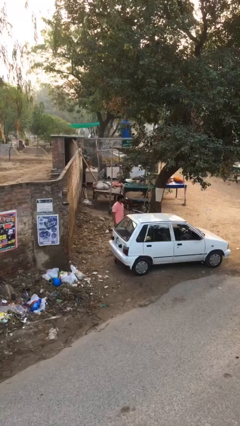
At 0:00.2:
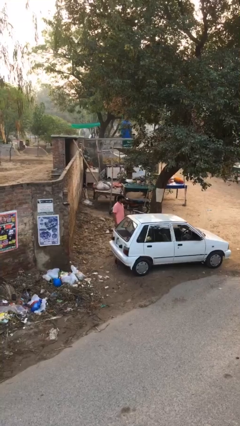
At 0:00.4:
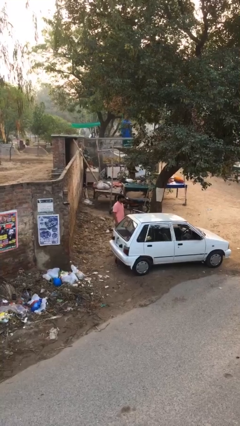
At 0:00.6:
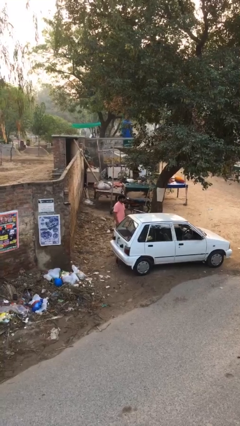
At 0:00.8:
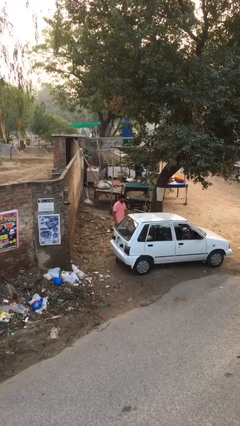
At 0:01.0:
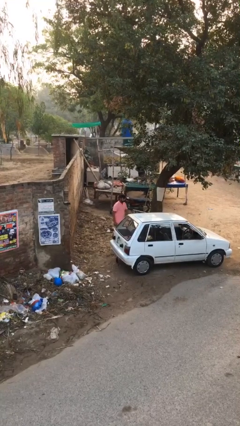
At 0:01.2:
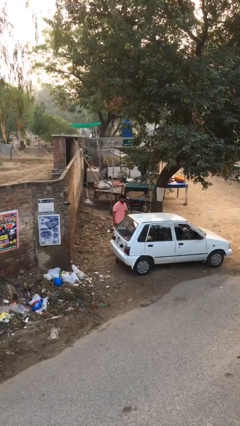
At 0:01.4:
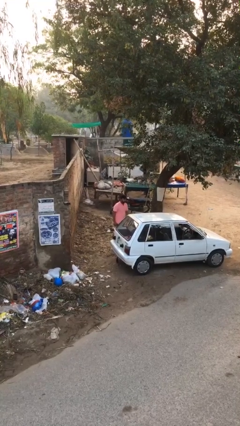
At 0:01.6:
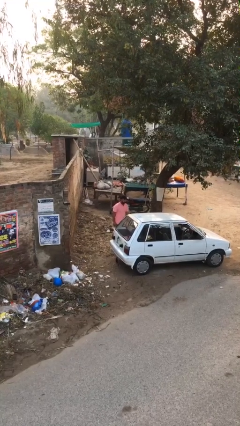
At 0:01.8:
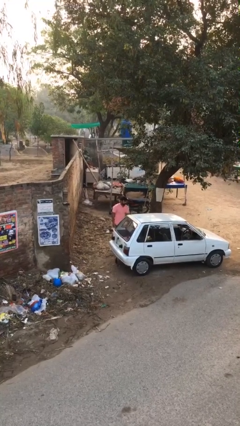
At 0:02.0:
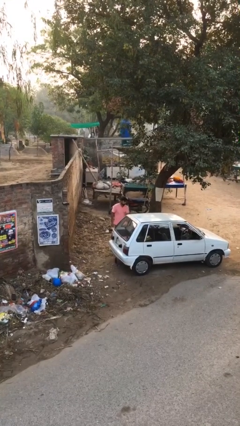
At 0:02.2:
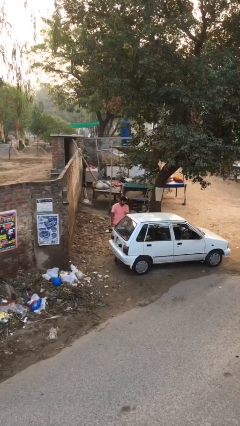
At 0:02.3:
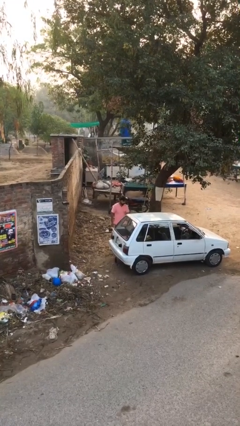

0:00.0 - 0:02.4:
person closes car door

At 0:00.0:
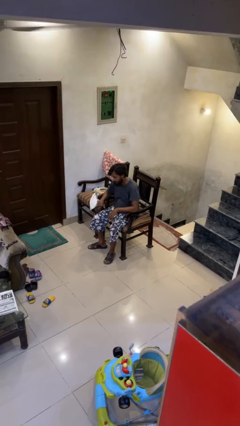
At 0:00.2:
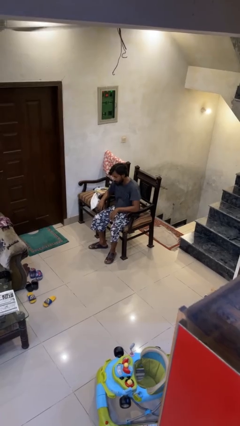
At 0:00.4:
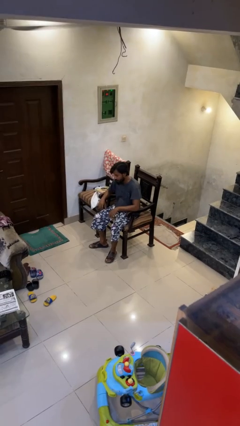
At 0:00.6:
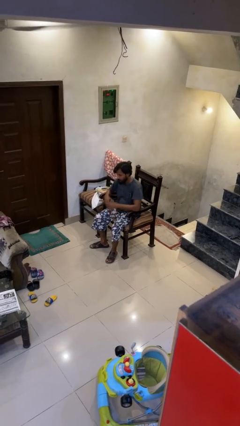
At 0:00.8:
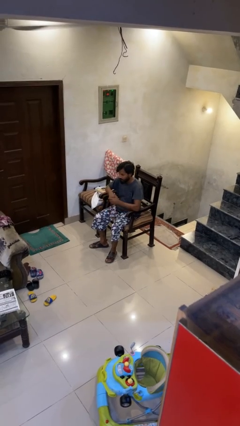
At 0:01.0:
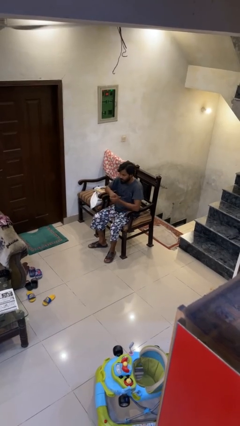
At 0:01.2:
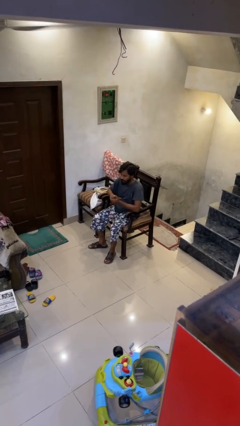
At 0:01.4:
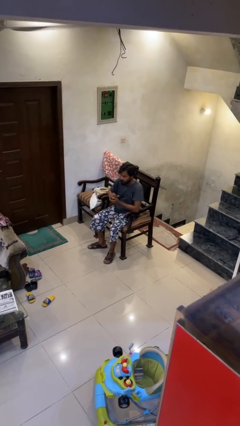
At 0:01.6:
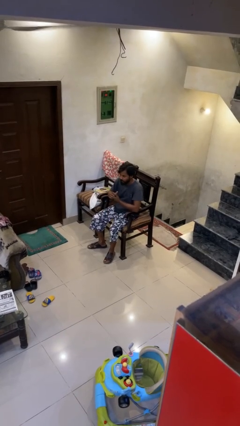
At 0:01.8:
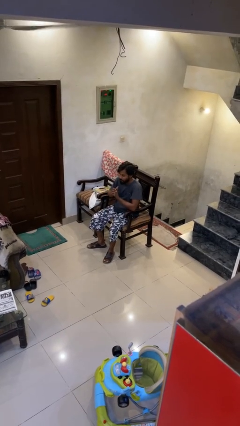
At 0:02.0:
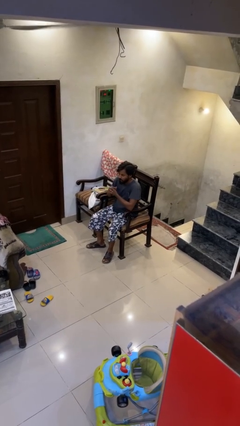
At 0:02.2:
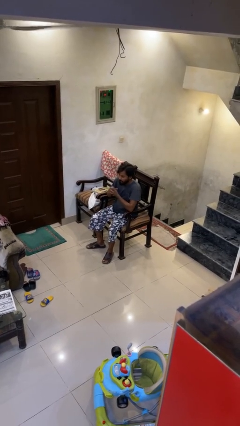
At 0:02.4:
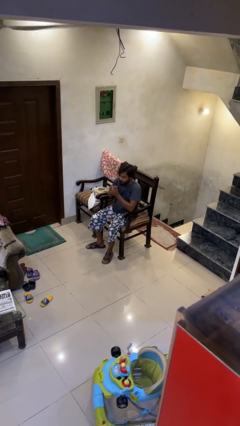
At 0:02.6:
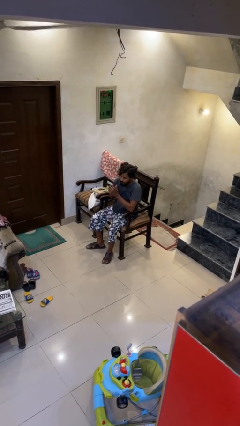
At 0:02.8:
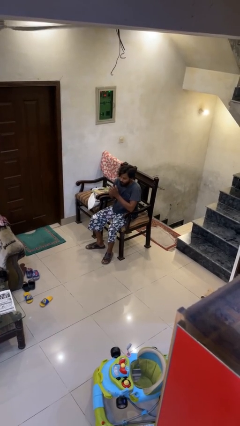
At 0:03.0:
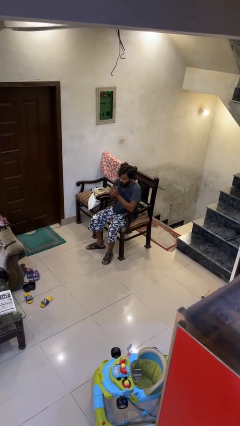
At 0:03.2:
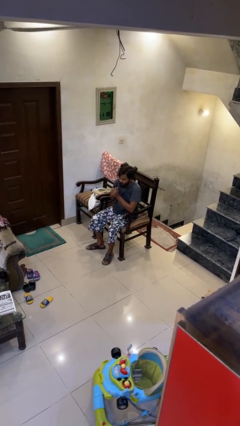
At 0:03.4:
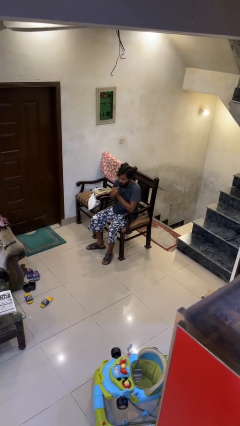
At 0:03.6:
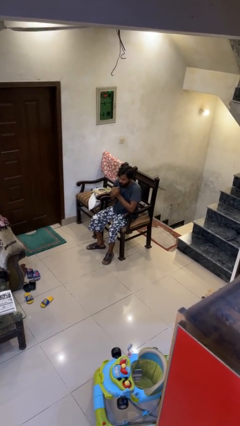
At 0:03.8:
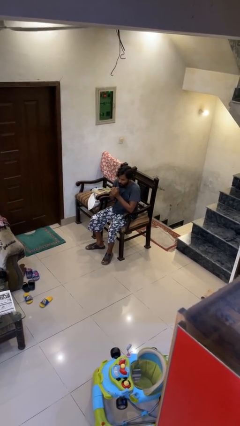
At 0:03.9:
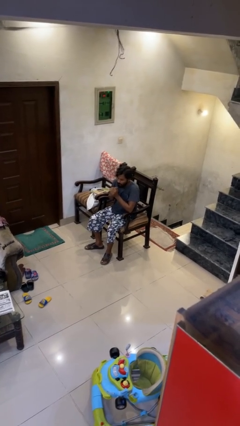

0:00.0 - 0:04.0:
person cracks knuckles

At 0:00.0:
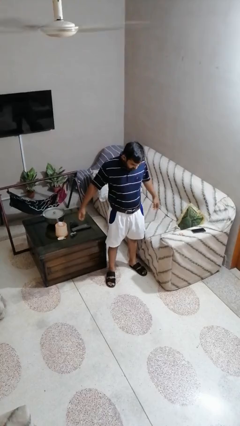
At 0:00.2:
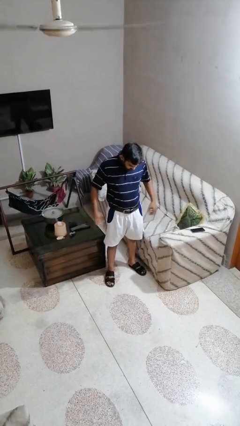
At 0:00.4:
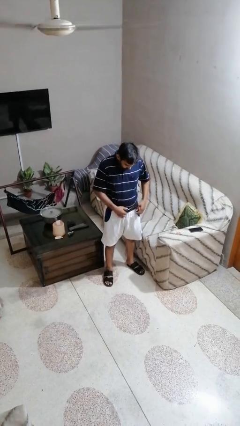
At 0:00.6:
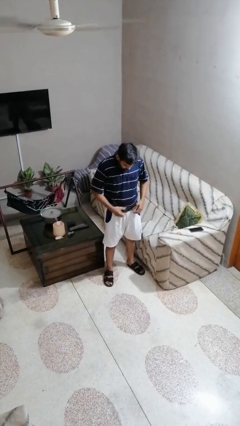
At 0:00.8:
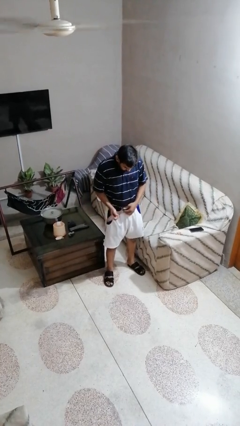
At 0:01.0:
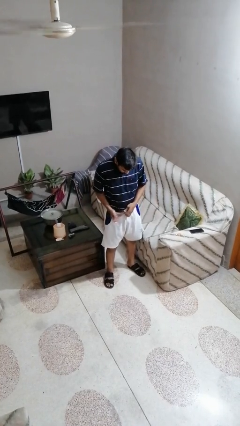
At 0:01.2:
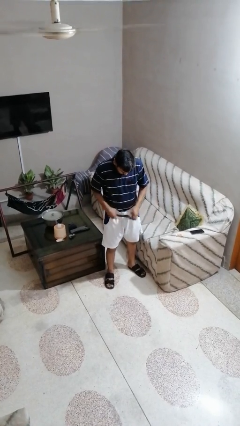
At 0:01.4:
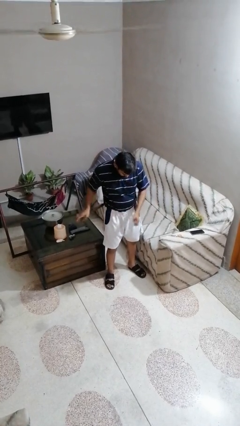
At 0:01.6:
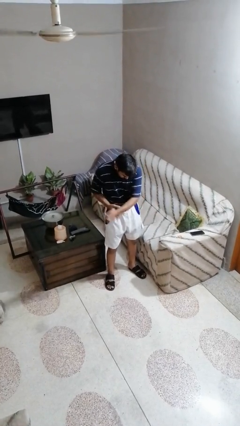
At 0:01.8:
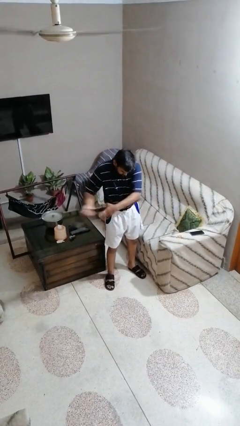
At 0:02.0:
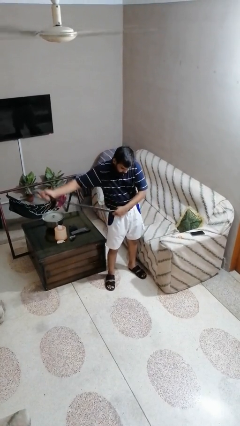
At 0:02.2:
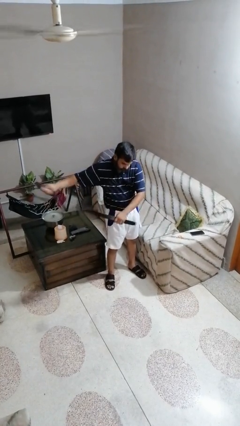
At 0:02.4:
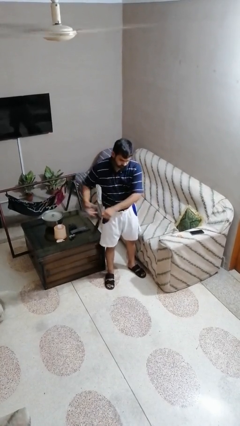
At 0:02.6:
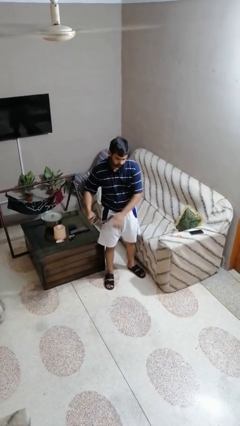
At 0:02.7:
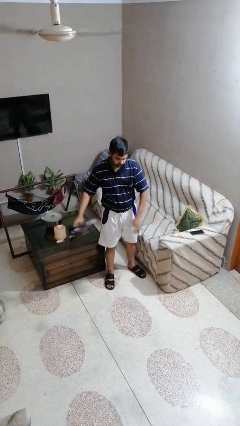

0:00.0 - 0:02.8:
person takes off belt

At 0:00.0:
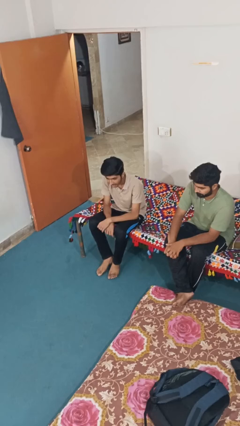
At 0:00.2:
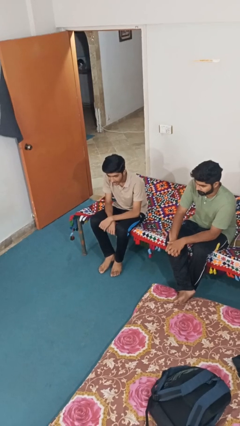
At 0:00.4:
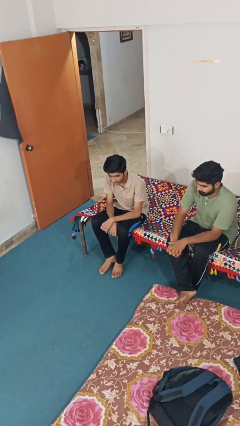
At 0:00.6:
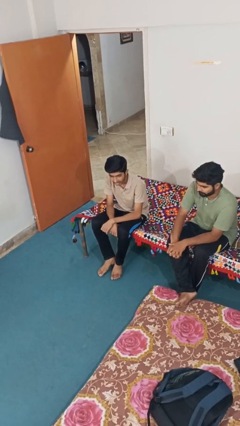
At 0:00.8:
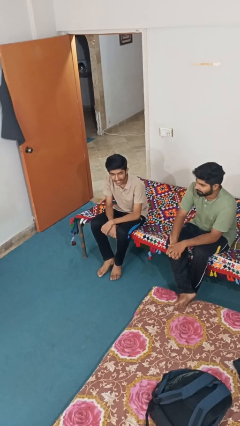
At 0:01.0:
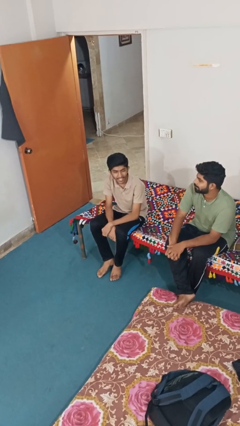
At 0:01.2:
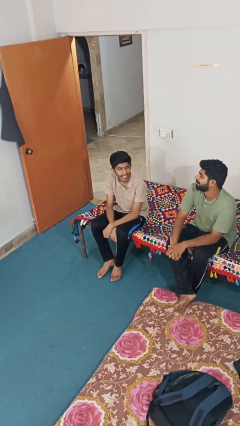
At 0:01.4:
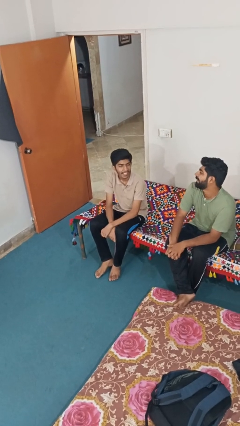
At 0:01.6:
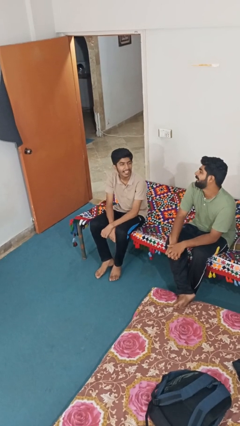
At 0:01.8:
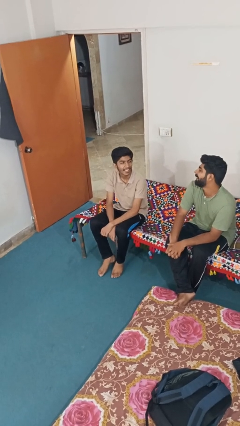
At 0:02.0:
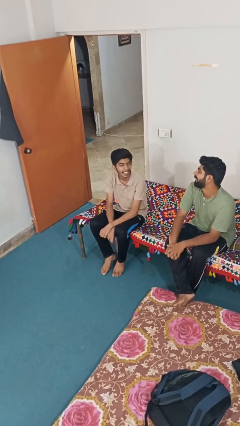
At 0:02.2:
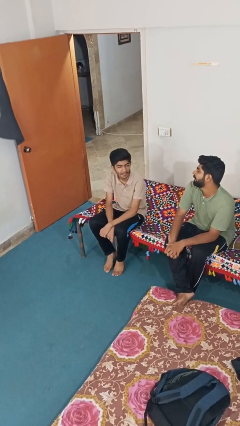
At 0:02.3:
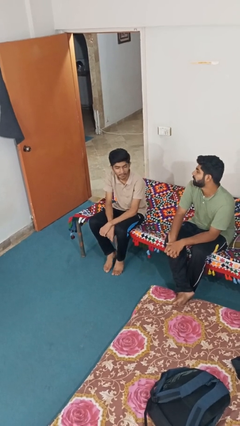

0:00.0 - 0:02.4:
person laughs with person

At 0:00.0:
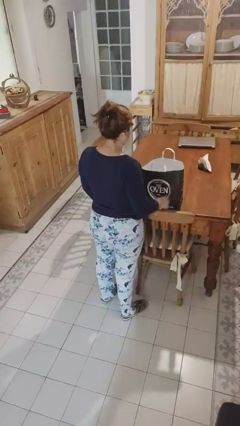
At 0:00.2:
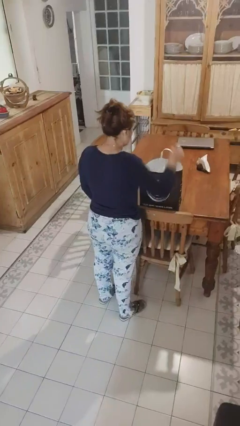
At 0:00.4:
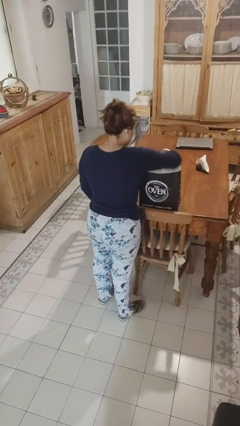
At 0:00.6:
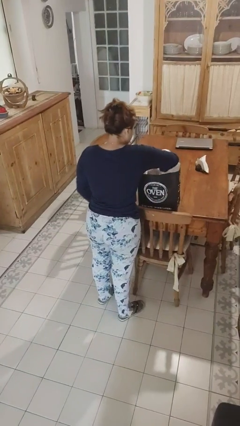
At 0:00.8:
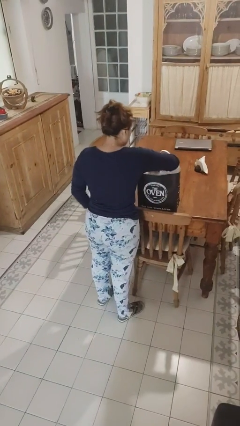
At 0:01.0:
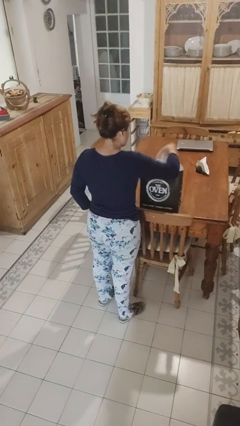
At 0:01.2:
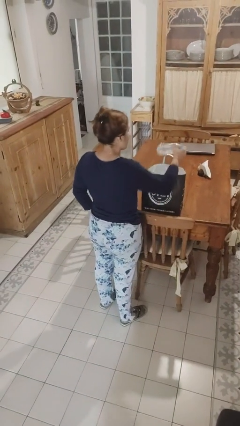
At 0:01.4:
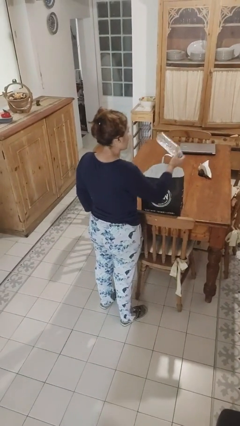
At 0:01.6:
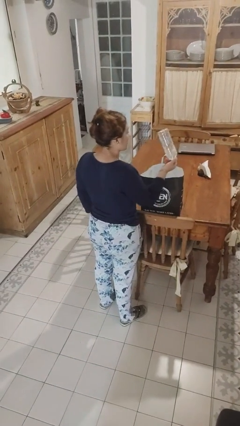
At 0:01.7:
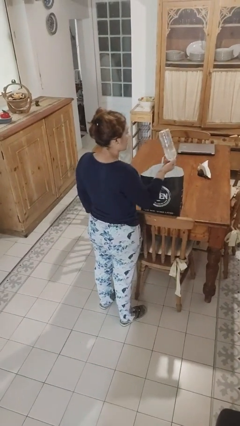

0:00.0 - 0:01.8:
person takes object from bag

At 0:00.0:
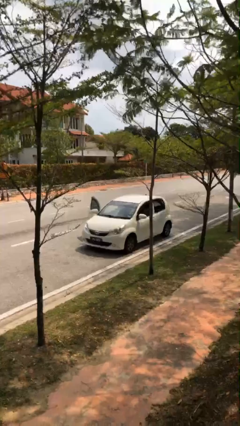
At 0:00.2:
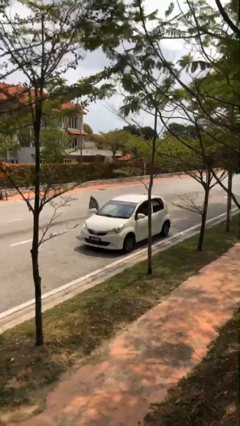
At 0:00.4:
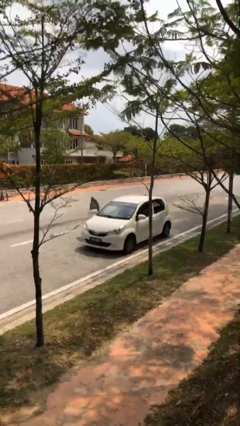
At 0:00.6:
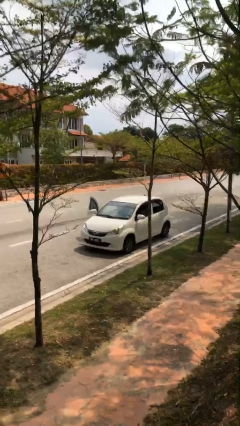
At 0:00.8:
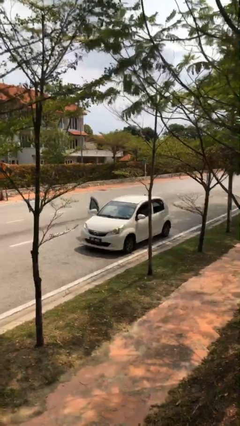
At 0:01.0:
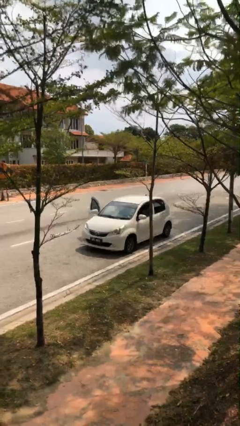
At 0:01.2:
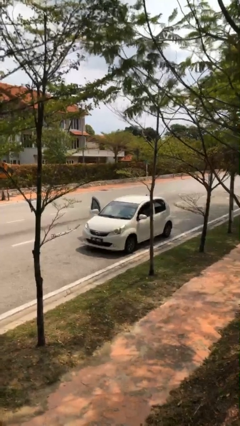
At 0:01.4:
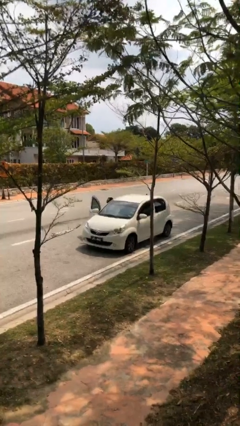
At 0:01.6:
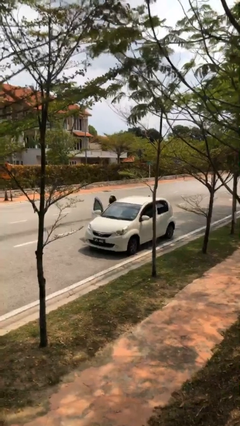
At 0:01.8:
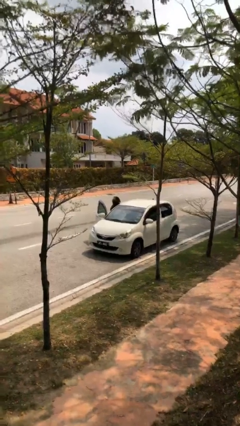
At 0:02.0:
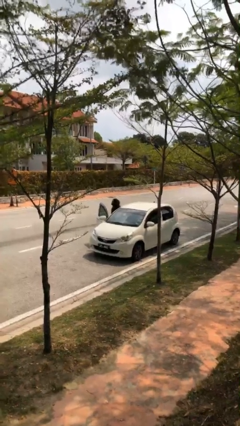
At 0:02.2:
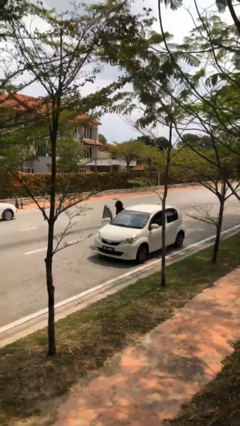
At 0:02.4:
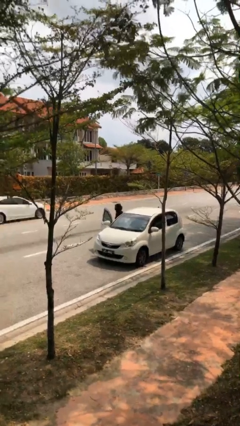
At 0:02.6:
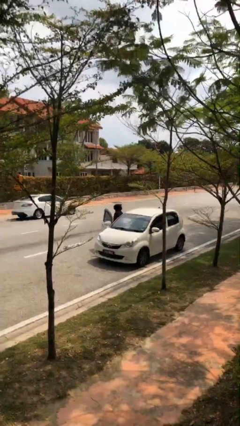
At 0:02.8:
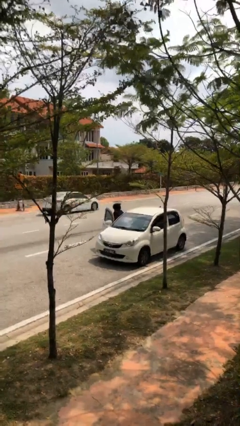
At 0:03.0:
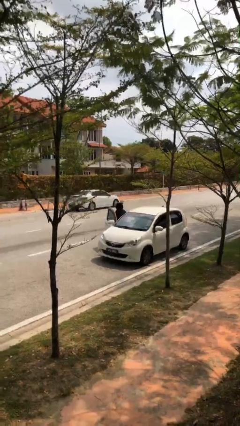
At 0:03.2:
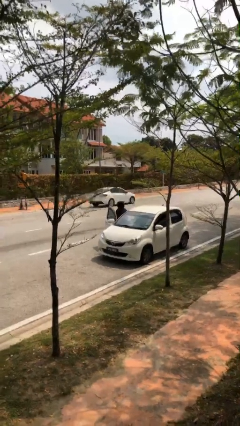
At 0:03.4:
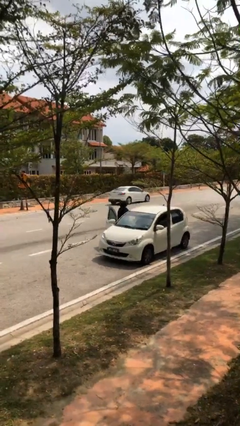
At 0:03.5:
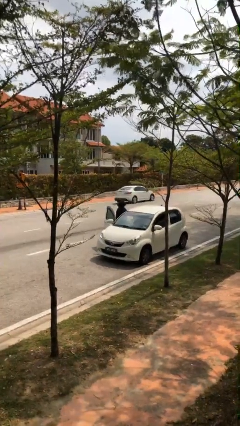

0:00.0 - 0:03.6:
person exits car

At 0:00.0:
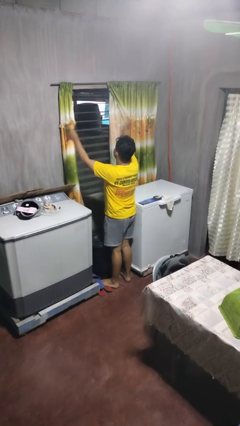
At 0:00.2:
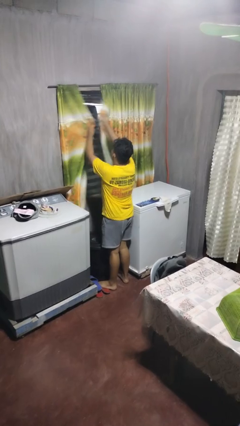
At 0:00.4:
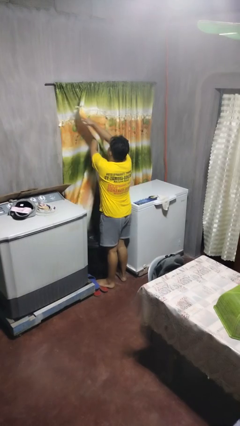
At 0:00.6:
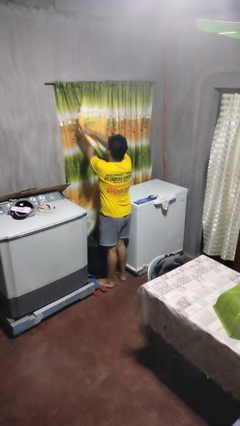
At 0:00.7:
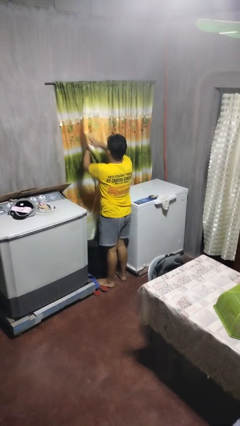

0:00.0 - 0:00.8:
person closes curtains
